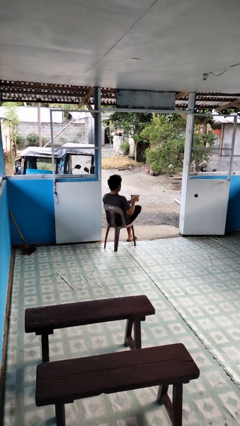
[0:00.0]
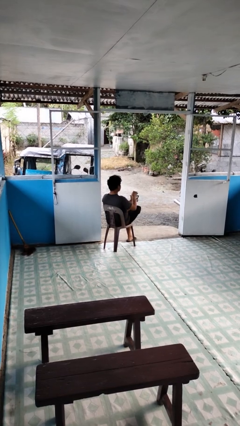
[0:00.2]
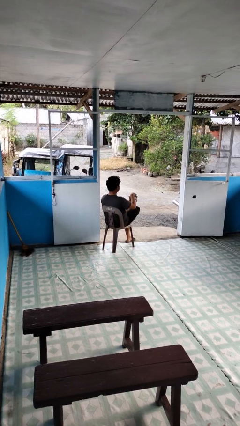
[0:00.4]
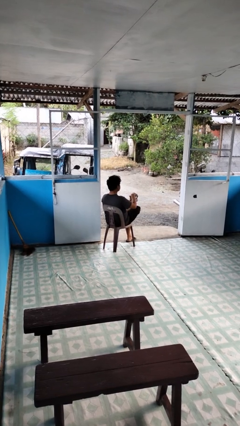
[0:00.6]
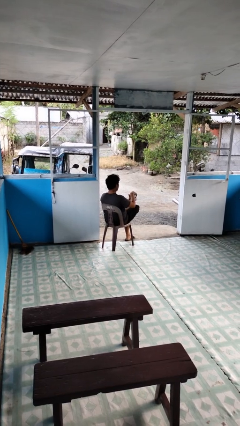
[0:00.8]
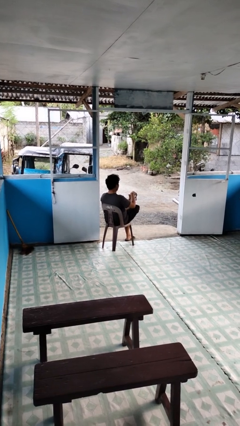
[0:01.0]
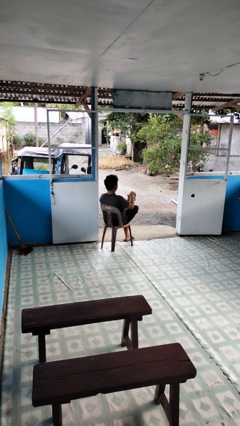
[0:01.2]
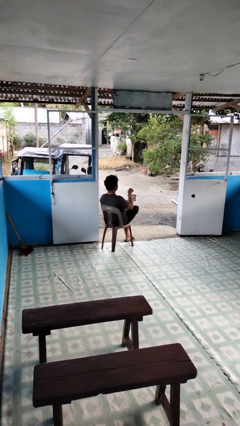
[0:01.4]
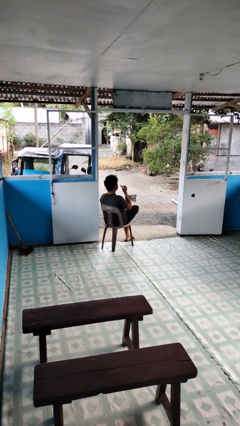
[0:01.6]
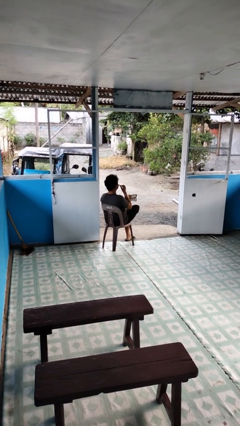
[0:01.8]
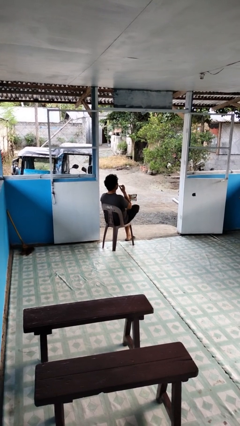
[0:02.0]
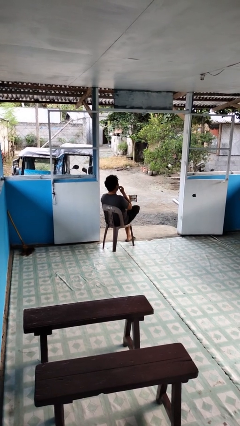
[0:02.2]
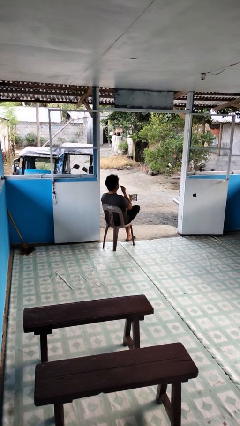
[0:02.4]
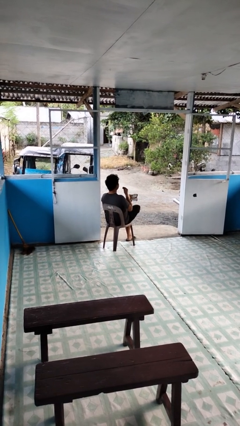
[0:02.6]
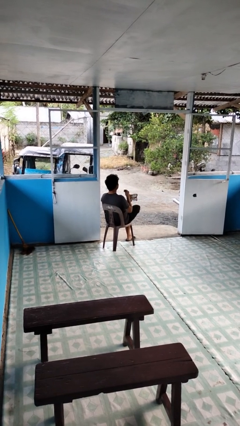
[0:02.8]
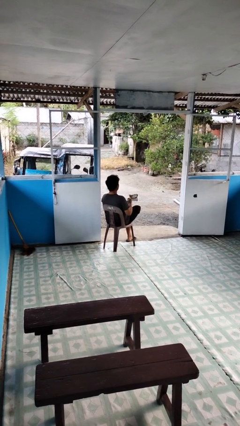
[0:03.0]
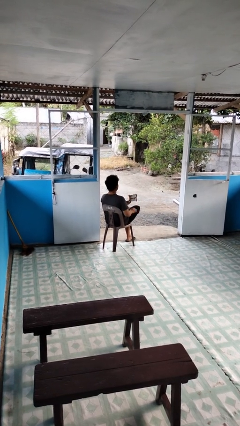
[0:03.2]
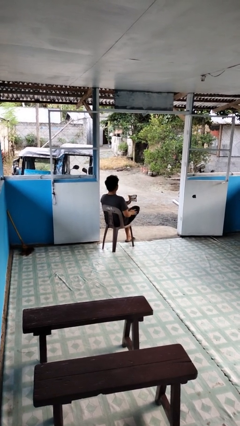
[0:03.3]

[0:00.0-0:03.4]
person eats snack from bag

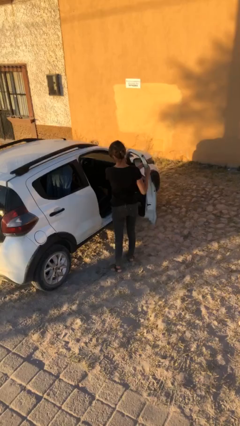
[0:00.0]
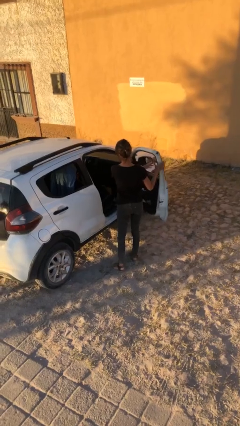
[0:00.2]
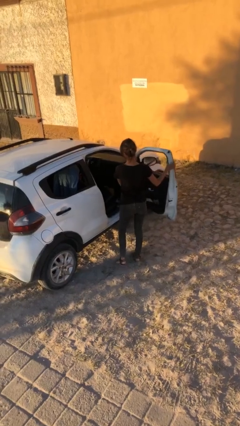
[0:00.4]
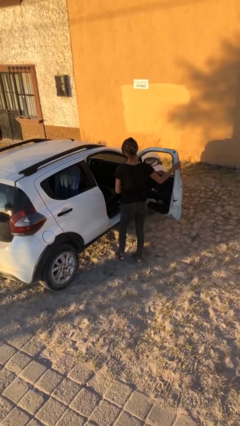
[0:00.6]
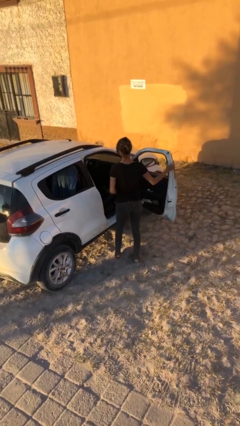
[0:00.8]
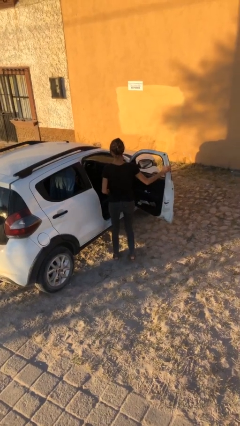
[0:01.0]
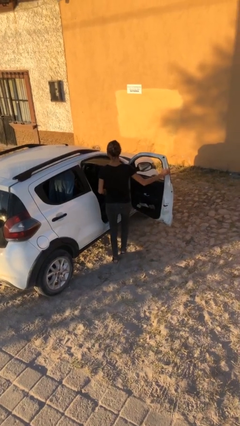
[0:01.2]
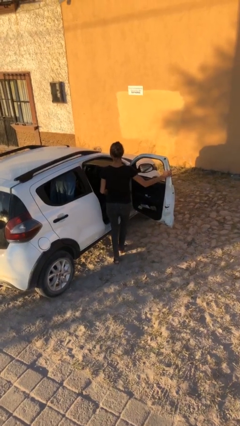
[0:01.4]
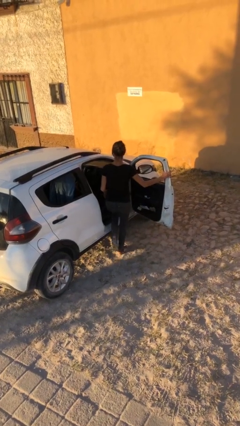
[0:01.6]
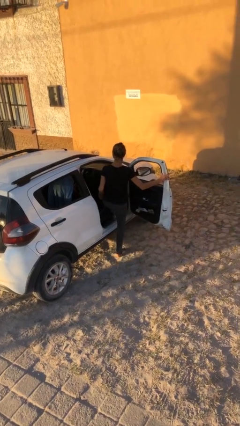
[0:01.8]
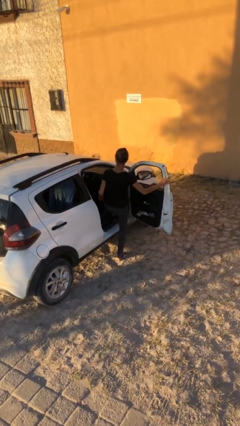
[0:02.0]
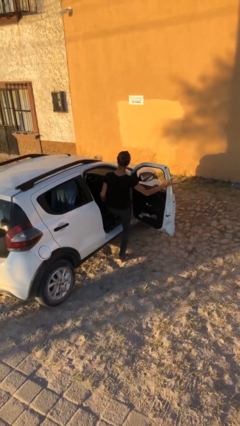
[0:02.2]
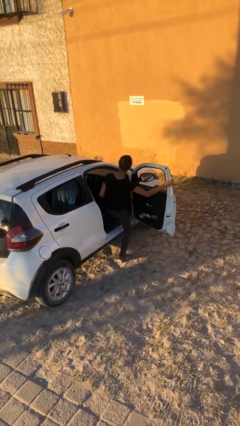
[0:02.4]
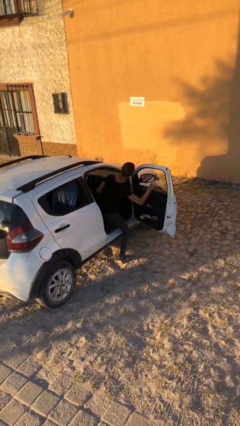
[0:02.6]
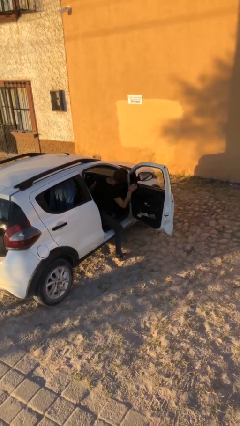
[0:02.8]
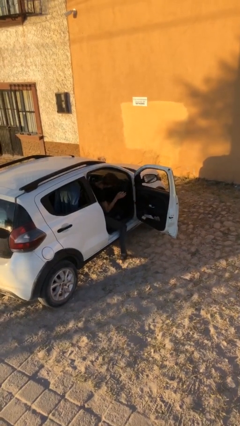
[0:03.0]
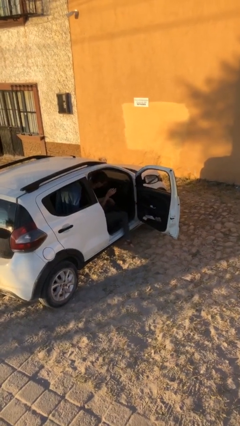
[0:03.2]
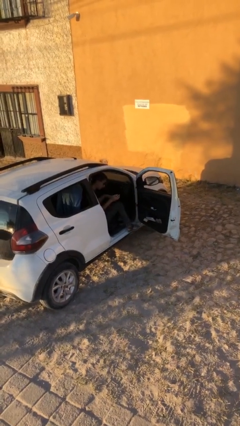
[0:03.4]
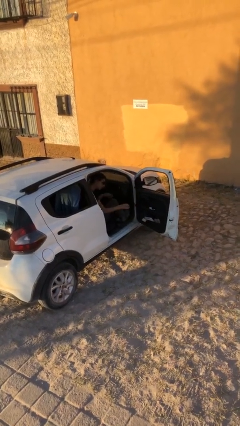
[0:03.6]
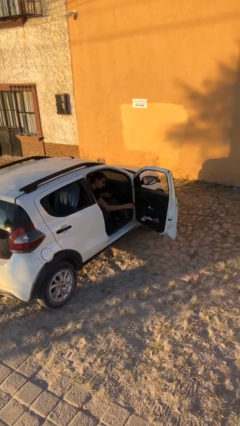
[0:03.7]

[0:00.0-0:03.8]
person enters car

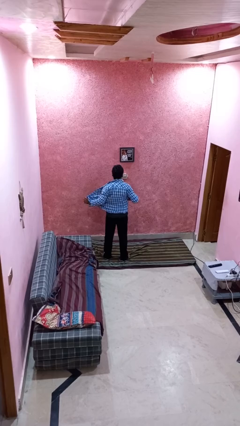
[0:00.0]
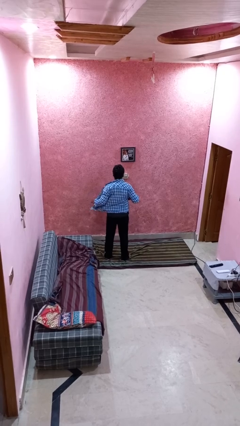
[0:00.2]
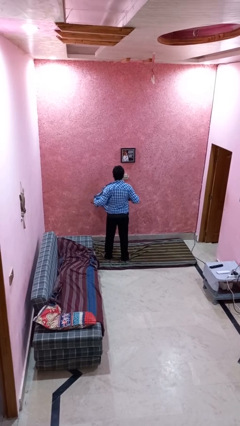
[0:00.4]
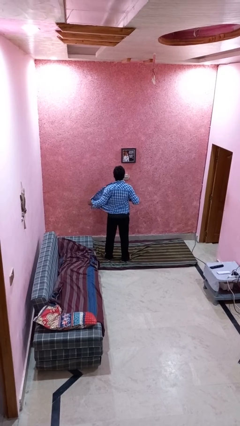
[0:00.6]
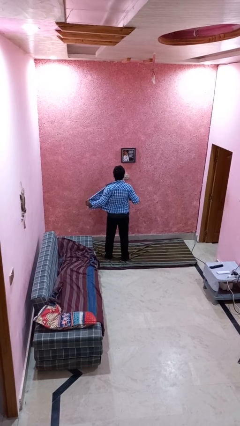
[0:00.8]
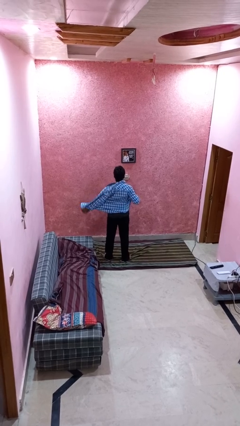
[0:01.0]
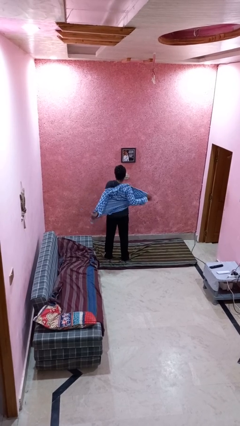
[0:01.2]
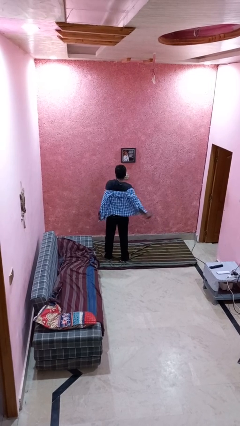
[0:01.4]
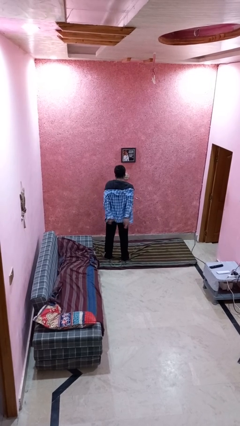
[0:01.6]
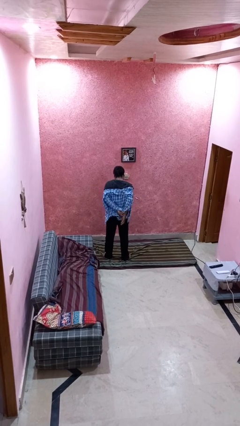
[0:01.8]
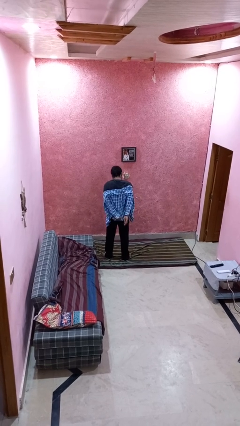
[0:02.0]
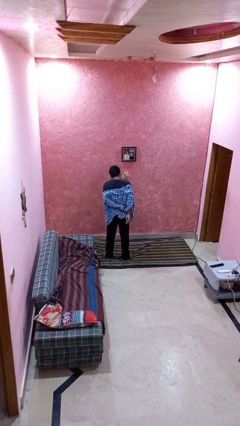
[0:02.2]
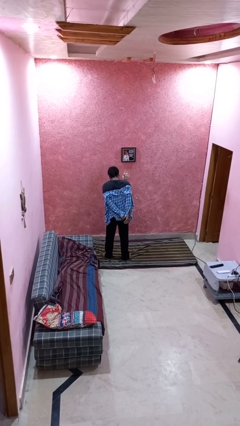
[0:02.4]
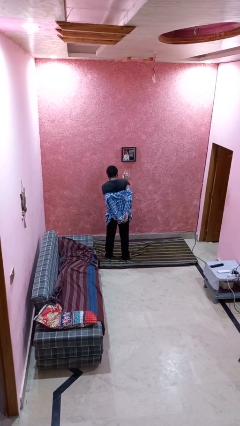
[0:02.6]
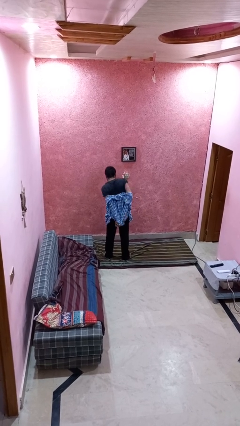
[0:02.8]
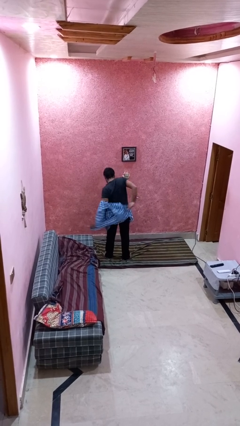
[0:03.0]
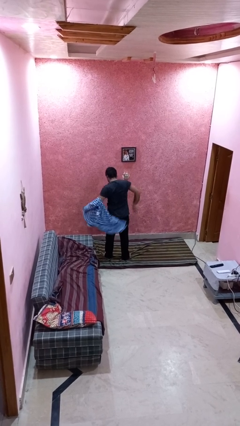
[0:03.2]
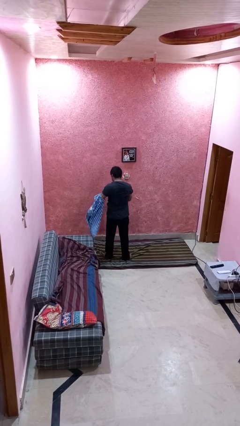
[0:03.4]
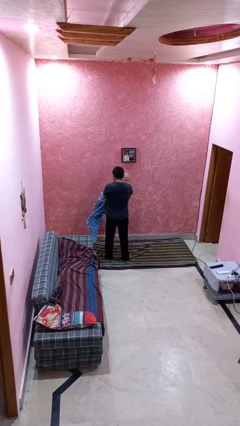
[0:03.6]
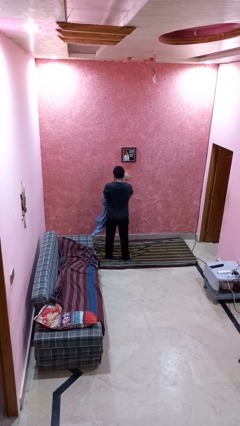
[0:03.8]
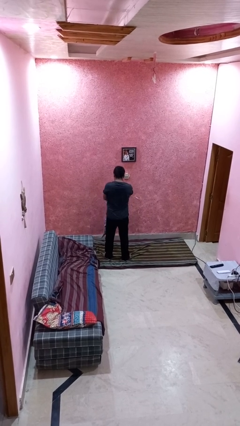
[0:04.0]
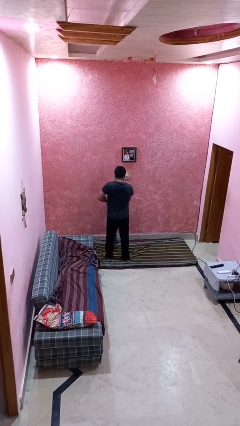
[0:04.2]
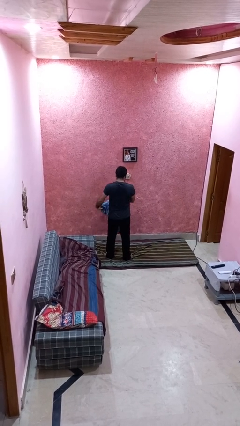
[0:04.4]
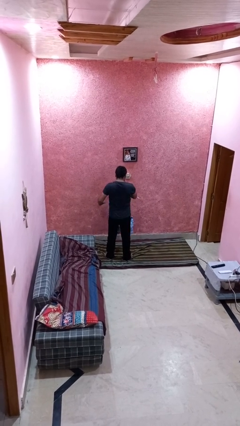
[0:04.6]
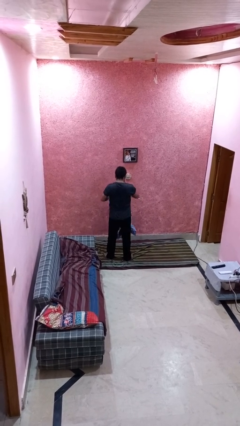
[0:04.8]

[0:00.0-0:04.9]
person takes off shirt

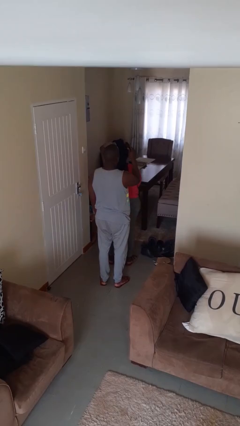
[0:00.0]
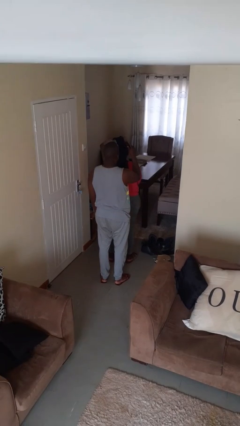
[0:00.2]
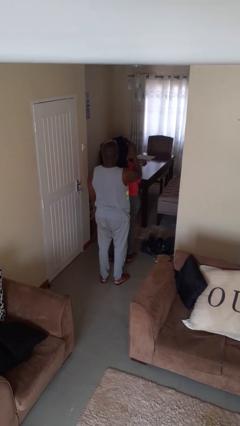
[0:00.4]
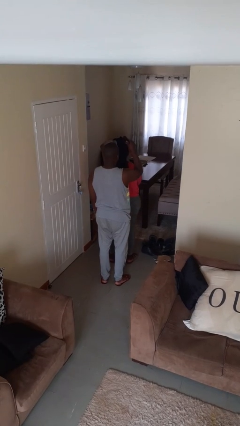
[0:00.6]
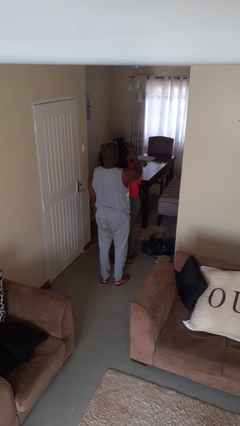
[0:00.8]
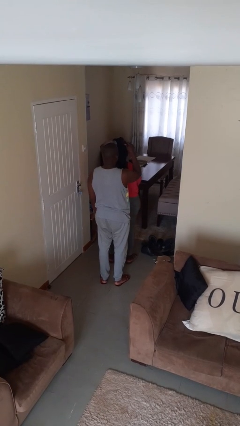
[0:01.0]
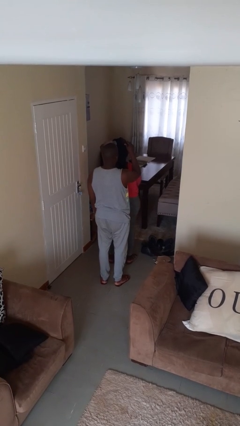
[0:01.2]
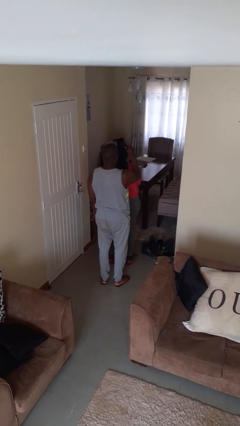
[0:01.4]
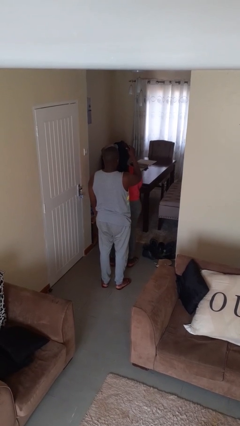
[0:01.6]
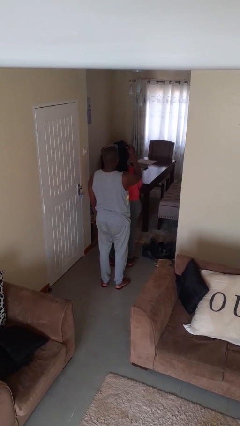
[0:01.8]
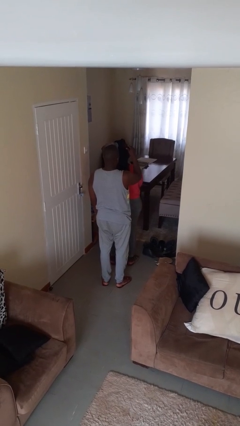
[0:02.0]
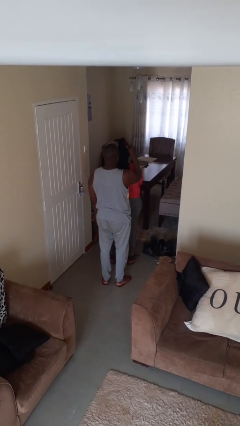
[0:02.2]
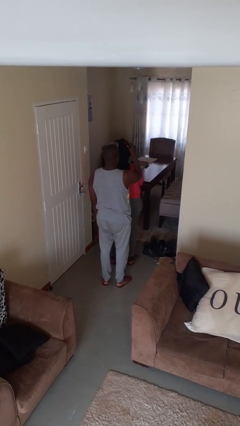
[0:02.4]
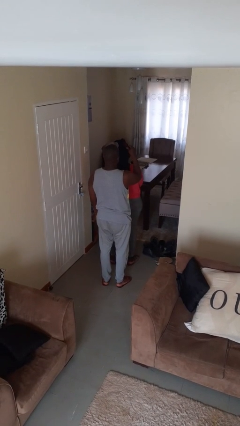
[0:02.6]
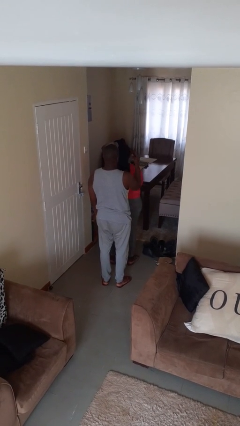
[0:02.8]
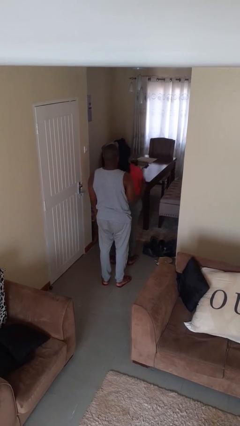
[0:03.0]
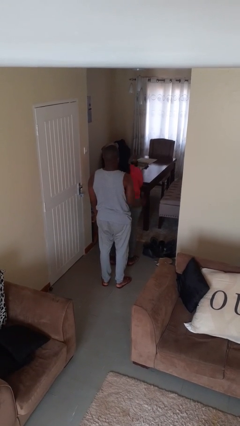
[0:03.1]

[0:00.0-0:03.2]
person brushes hair of person

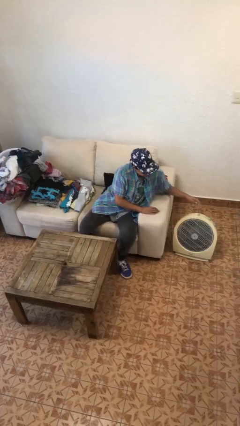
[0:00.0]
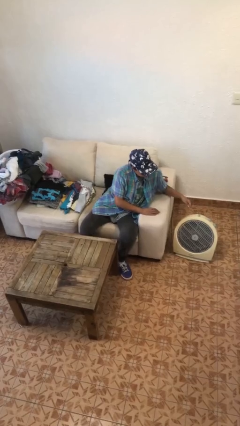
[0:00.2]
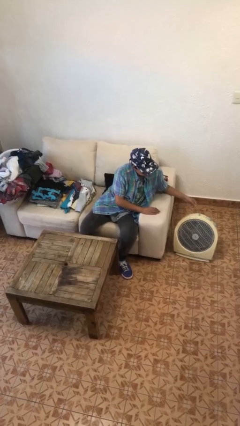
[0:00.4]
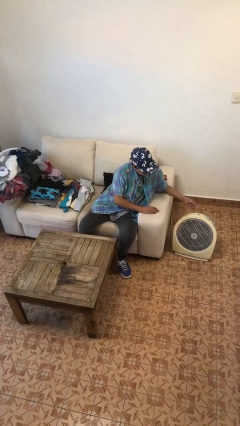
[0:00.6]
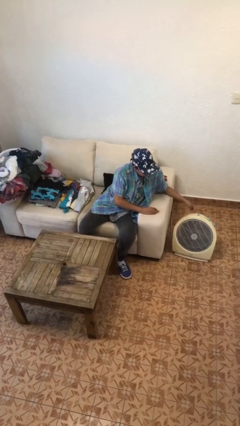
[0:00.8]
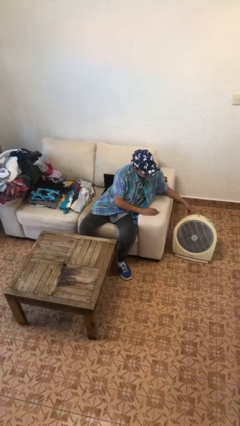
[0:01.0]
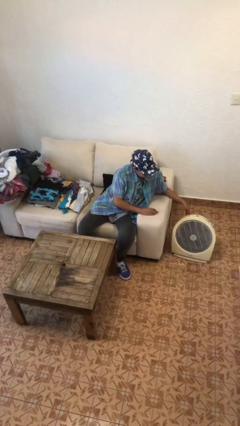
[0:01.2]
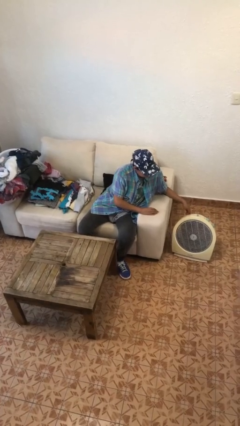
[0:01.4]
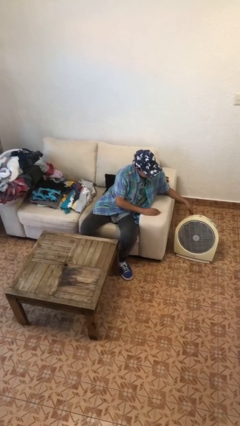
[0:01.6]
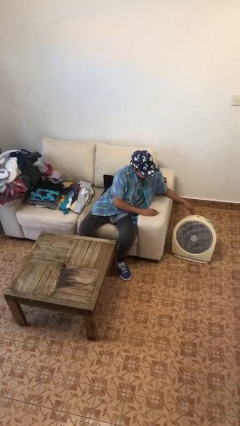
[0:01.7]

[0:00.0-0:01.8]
person turns on fan

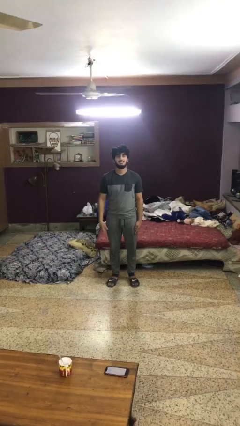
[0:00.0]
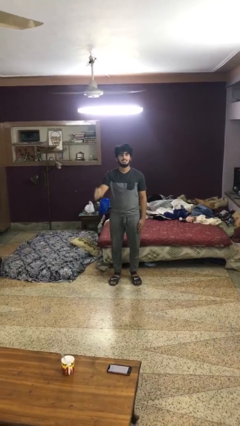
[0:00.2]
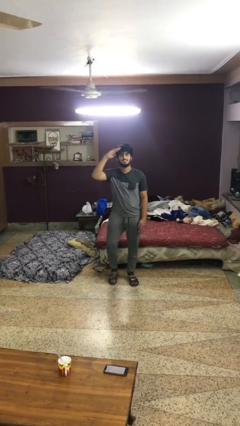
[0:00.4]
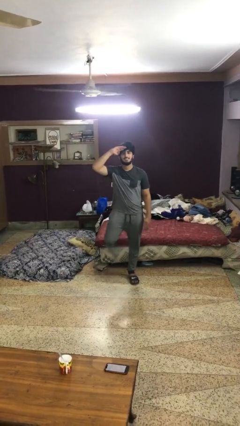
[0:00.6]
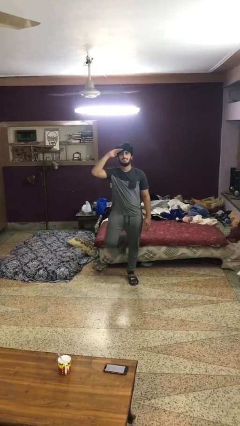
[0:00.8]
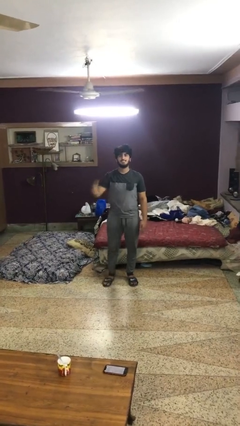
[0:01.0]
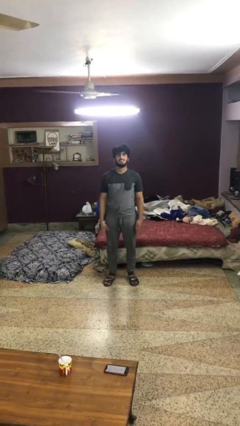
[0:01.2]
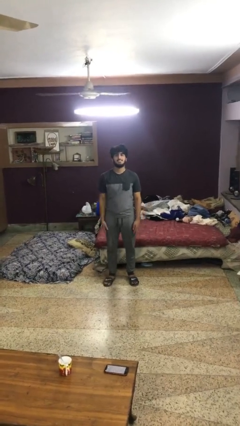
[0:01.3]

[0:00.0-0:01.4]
person salutes
